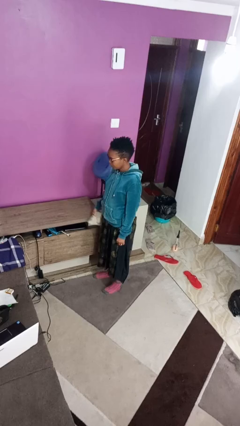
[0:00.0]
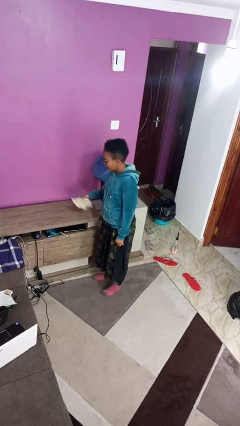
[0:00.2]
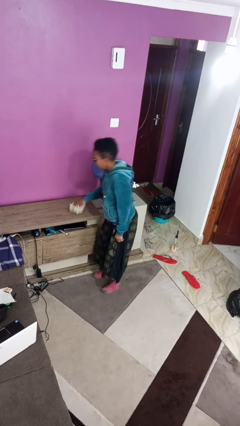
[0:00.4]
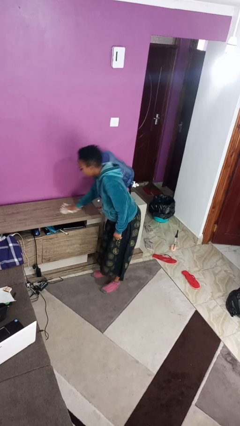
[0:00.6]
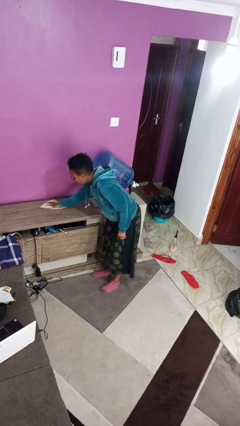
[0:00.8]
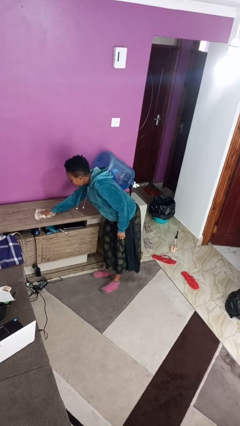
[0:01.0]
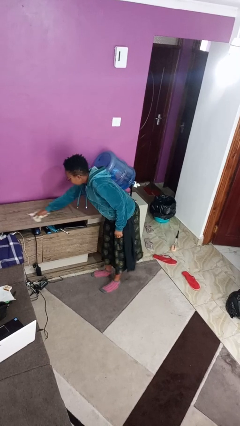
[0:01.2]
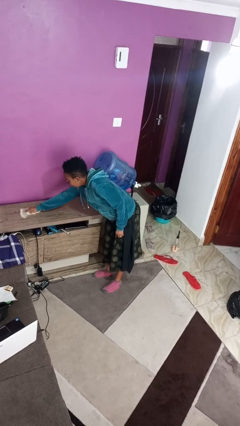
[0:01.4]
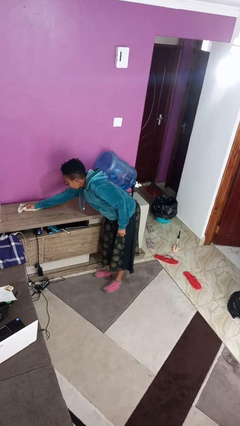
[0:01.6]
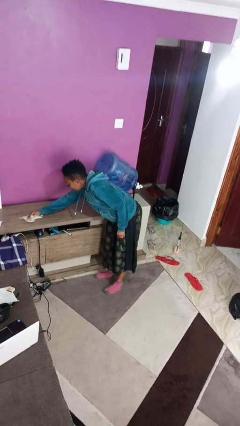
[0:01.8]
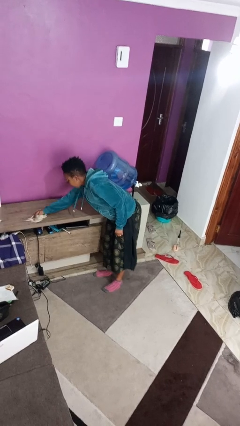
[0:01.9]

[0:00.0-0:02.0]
person cleans table with rag

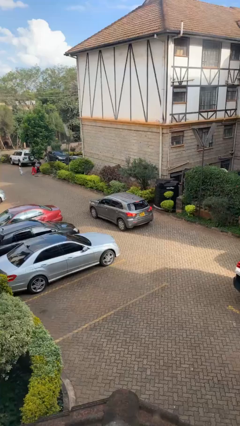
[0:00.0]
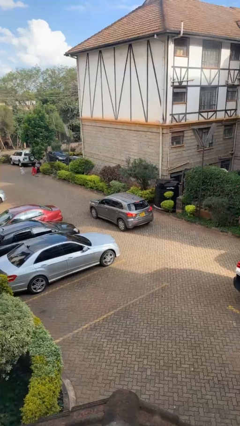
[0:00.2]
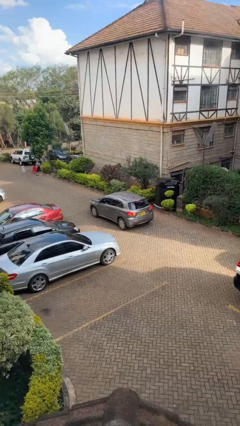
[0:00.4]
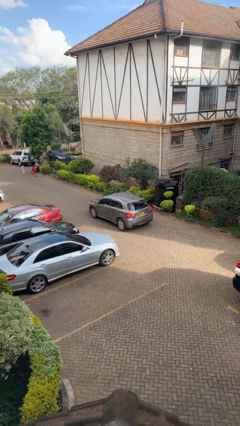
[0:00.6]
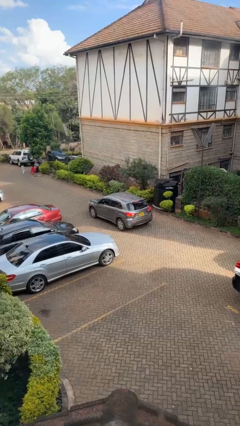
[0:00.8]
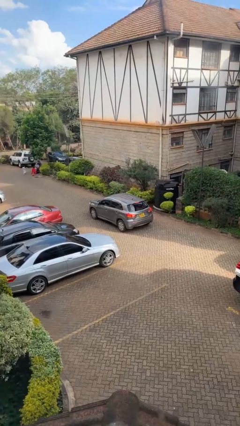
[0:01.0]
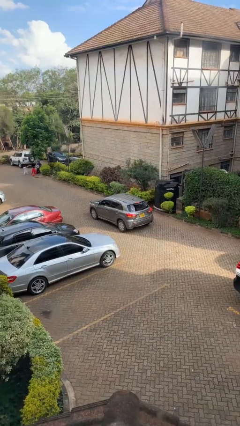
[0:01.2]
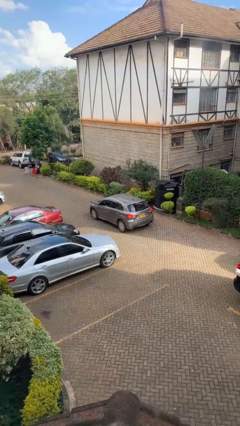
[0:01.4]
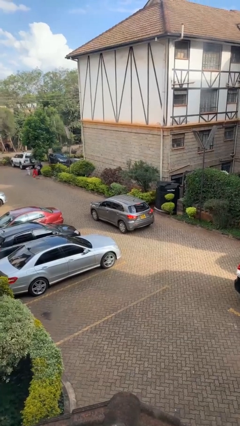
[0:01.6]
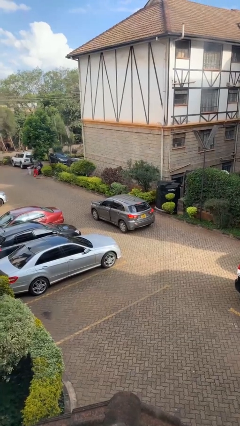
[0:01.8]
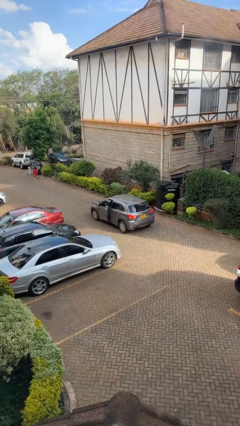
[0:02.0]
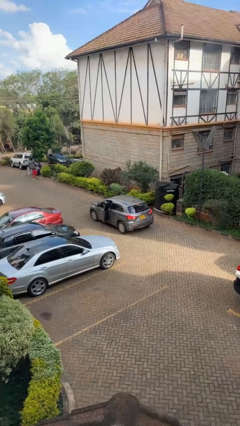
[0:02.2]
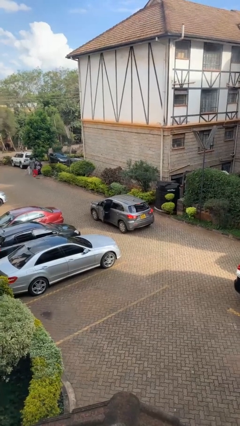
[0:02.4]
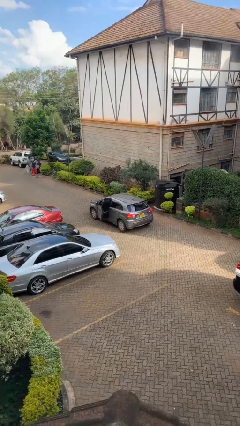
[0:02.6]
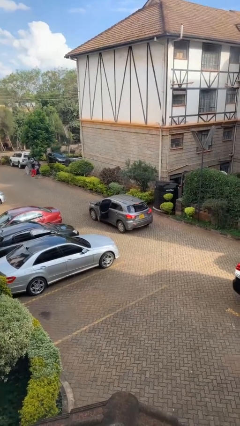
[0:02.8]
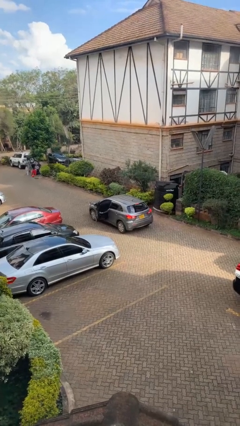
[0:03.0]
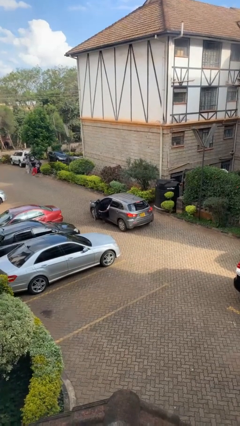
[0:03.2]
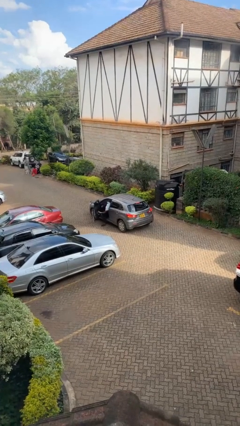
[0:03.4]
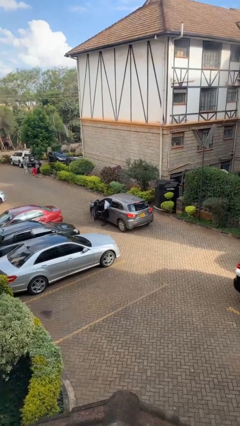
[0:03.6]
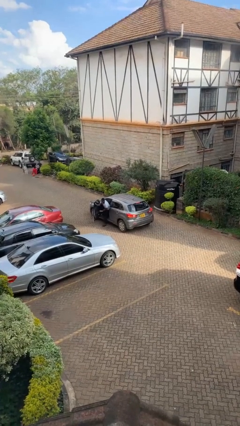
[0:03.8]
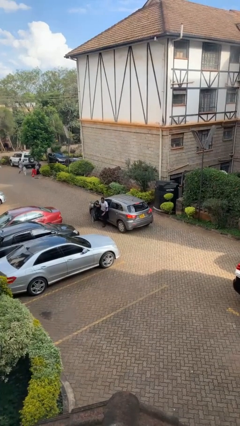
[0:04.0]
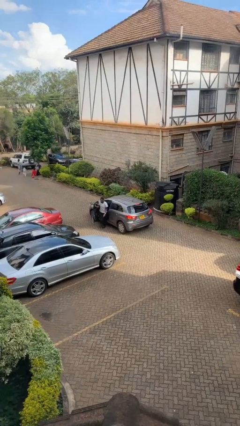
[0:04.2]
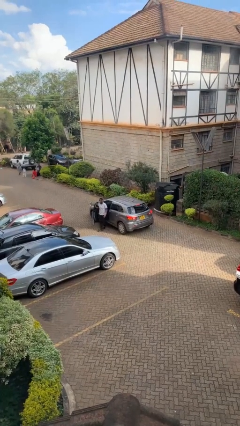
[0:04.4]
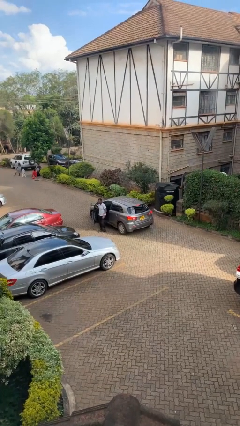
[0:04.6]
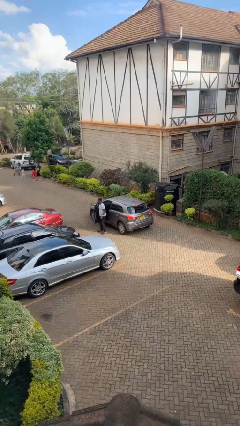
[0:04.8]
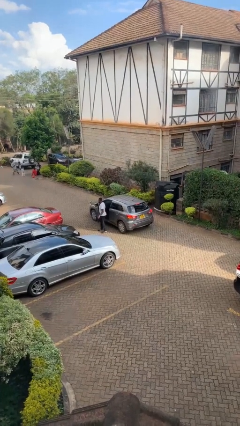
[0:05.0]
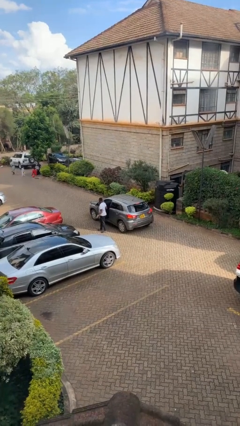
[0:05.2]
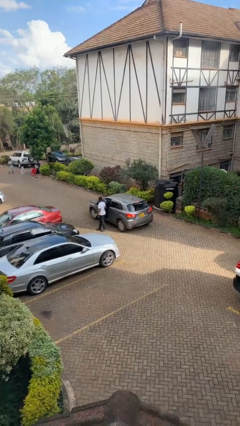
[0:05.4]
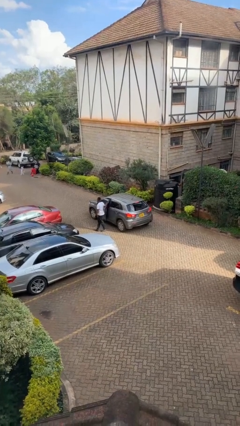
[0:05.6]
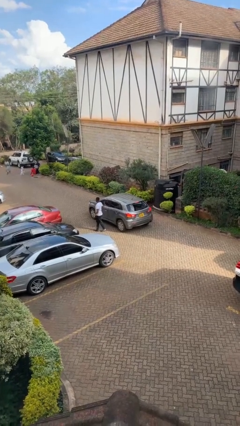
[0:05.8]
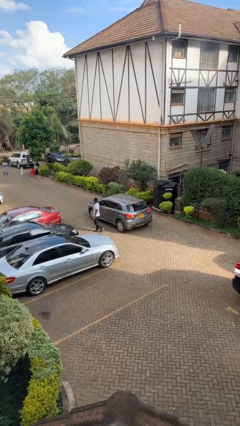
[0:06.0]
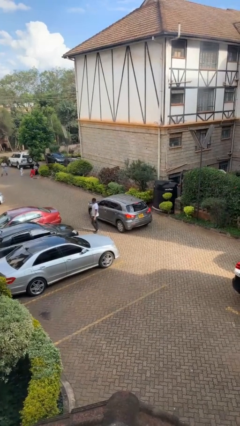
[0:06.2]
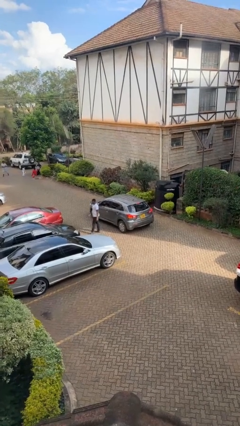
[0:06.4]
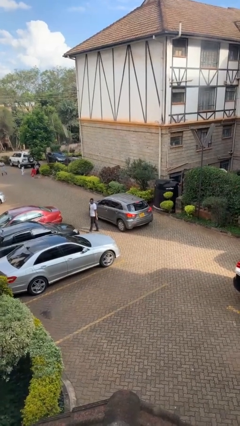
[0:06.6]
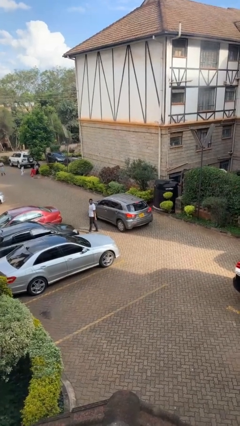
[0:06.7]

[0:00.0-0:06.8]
car drops off person

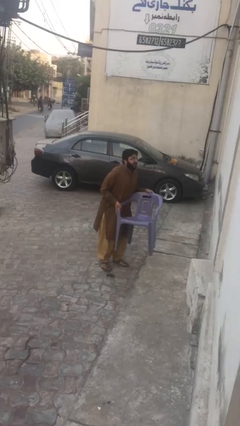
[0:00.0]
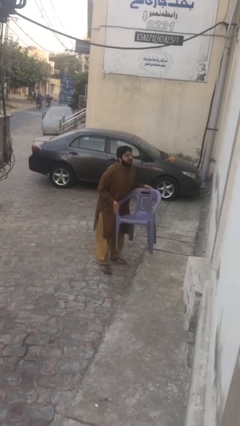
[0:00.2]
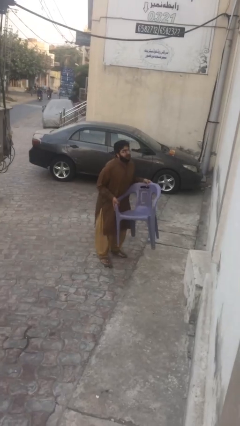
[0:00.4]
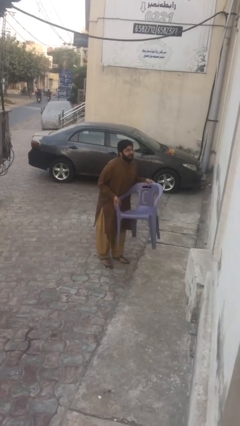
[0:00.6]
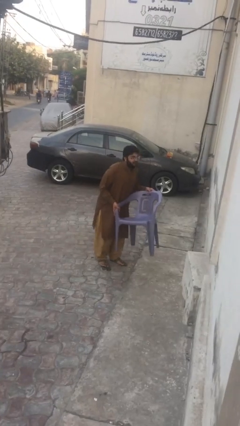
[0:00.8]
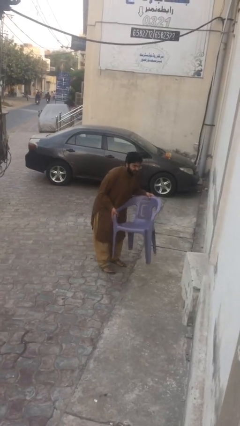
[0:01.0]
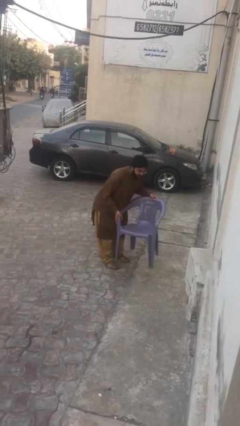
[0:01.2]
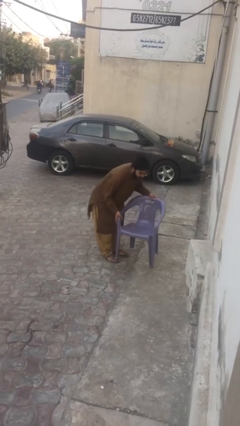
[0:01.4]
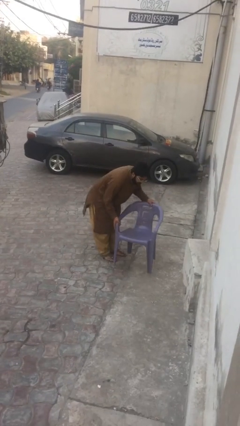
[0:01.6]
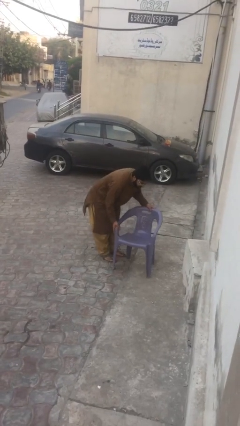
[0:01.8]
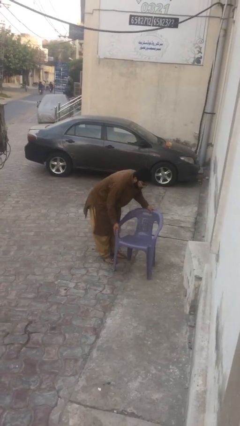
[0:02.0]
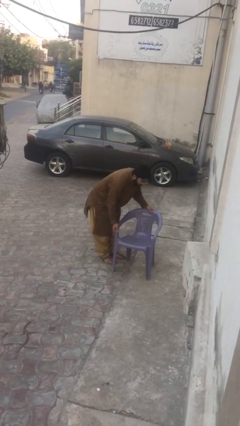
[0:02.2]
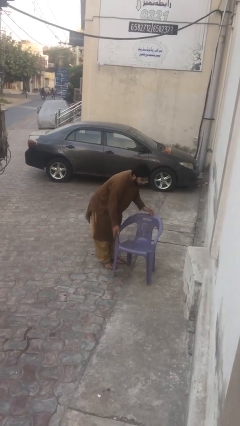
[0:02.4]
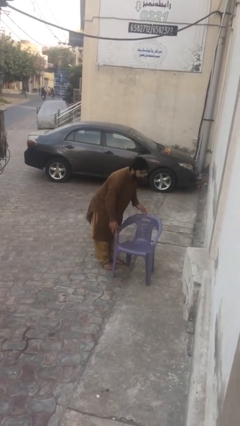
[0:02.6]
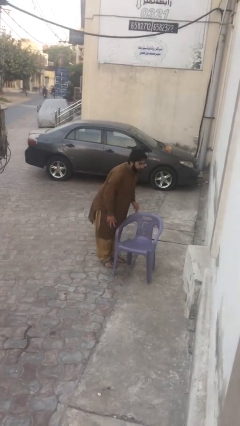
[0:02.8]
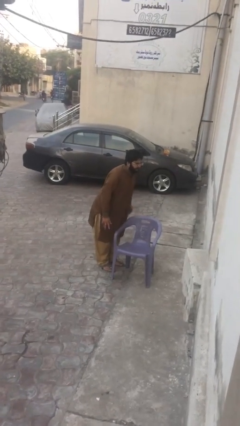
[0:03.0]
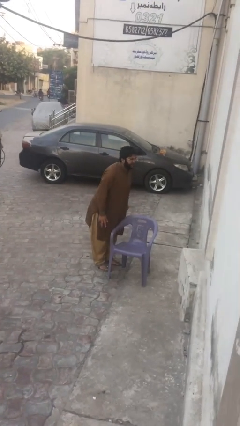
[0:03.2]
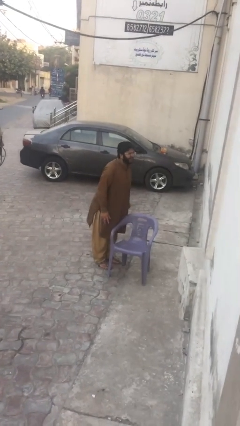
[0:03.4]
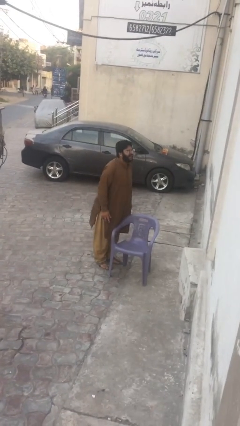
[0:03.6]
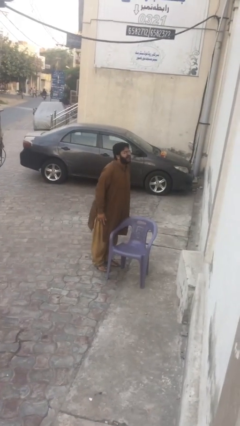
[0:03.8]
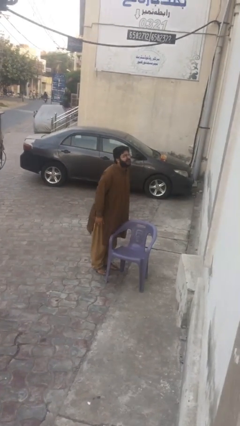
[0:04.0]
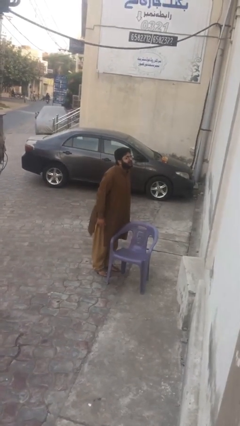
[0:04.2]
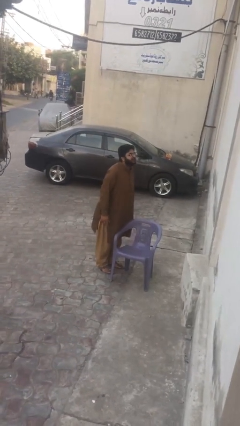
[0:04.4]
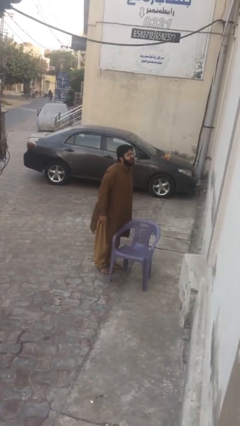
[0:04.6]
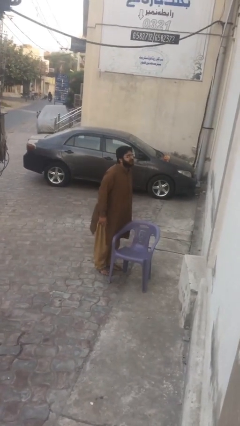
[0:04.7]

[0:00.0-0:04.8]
person puts down object on floor

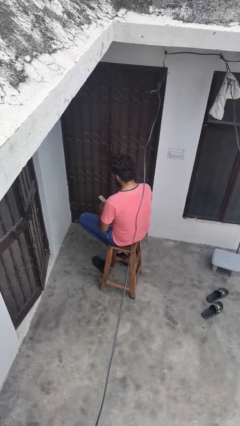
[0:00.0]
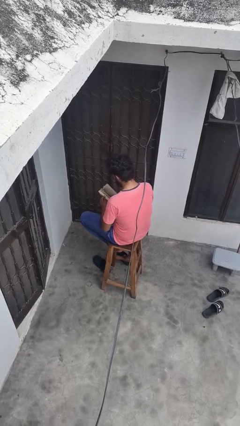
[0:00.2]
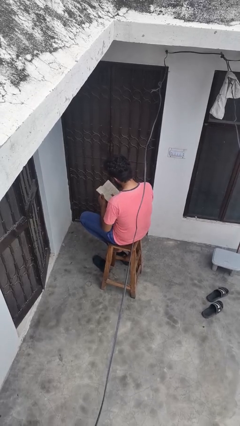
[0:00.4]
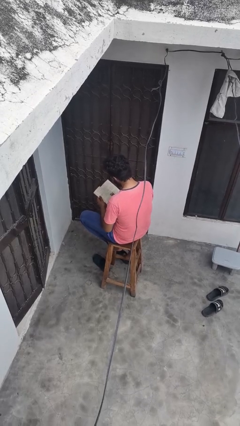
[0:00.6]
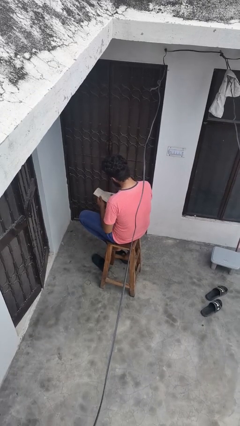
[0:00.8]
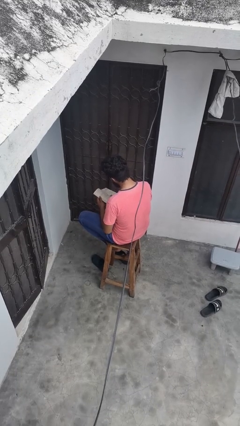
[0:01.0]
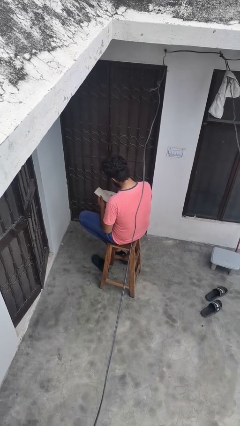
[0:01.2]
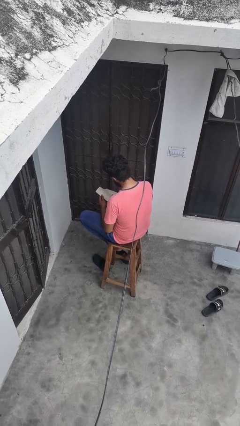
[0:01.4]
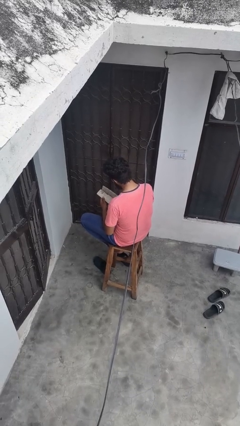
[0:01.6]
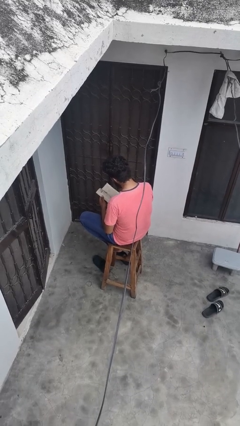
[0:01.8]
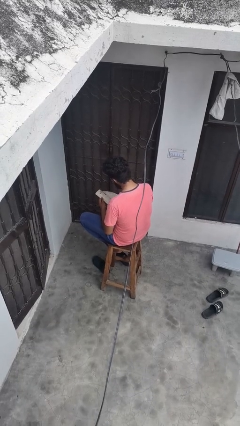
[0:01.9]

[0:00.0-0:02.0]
person reads book

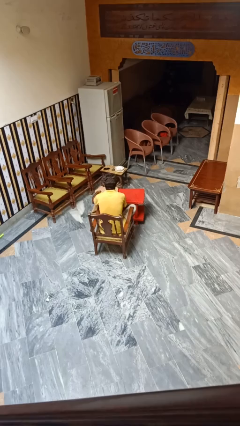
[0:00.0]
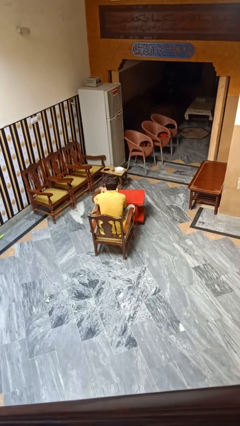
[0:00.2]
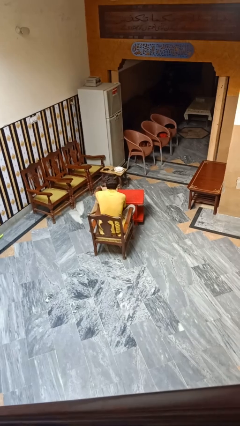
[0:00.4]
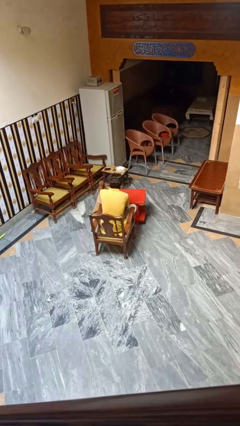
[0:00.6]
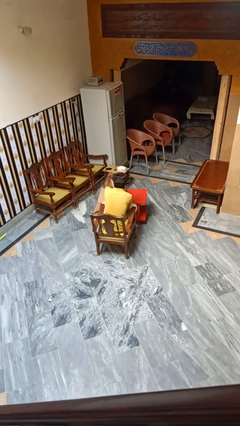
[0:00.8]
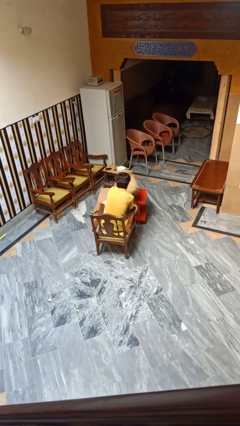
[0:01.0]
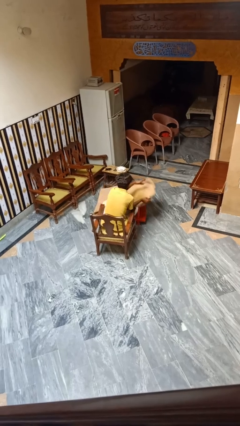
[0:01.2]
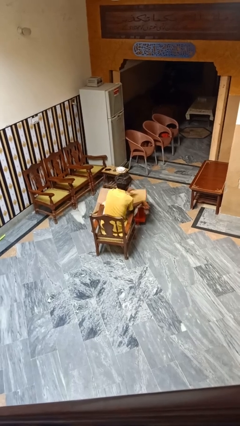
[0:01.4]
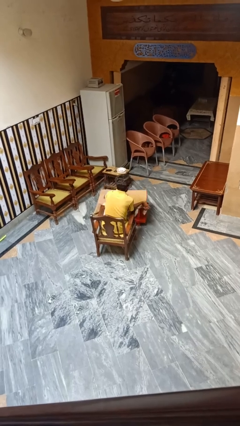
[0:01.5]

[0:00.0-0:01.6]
person spreads tablecloth

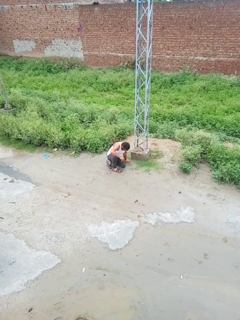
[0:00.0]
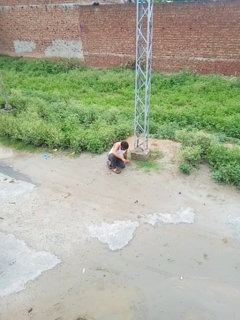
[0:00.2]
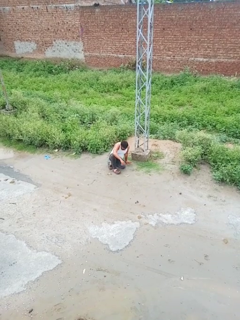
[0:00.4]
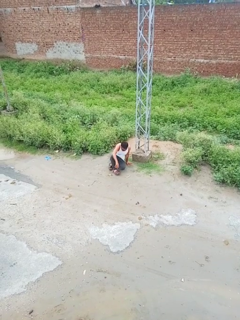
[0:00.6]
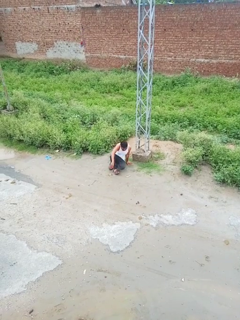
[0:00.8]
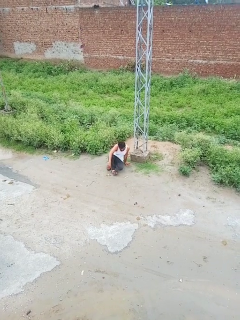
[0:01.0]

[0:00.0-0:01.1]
person lies down on floor
